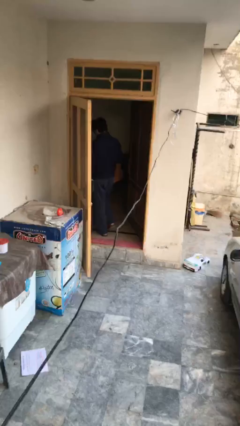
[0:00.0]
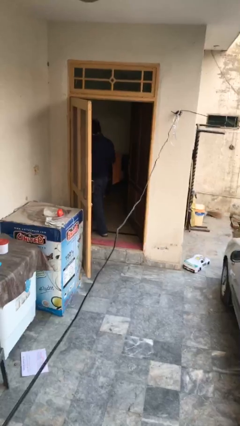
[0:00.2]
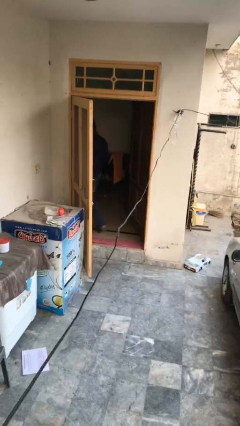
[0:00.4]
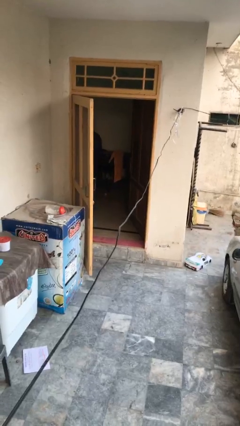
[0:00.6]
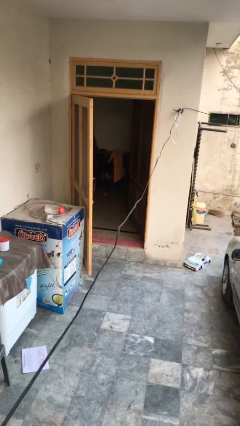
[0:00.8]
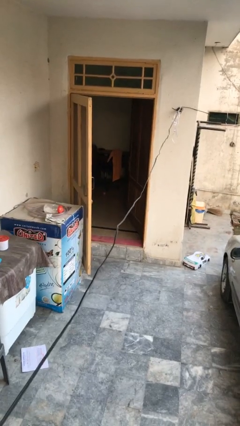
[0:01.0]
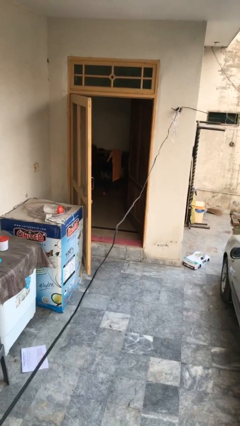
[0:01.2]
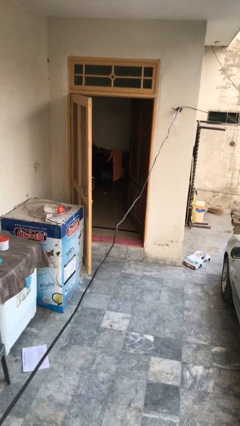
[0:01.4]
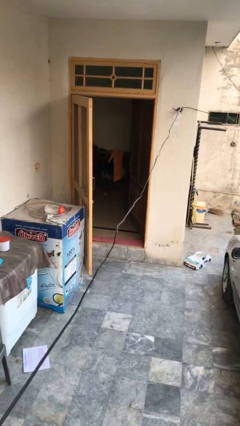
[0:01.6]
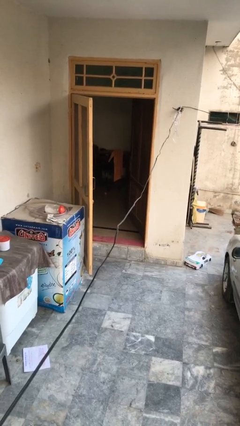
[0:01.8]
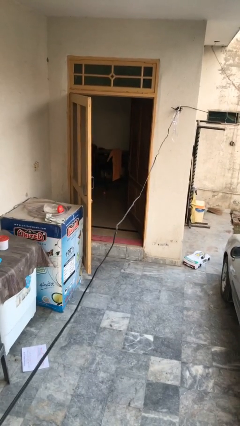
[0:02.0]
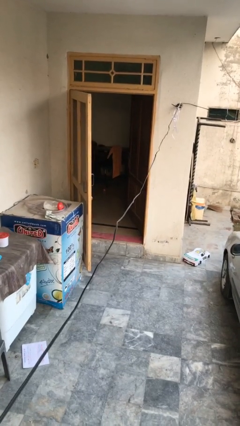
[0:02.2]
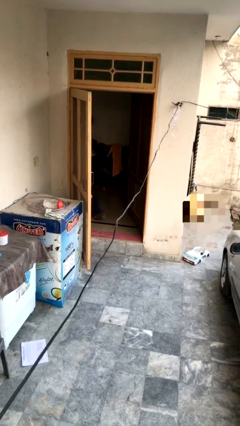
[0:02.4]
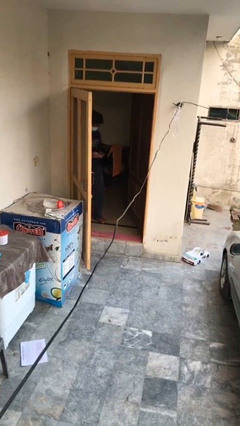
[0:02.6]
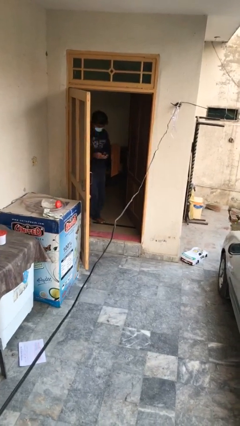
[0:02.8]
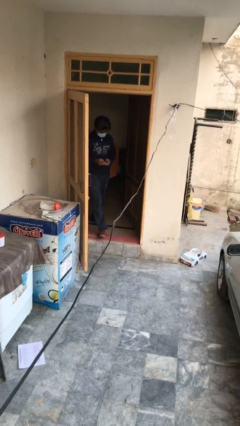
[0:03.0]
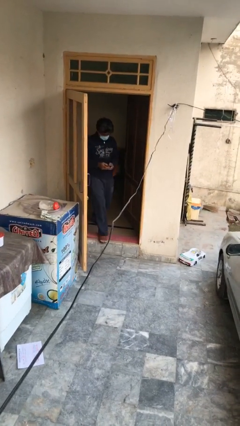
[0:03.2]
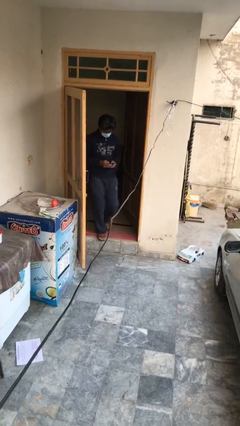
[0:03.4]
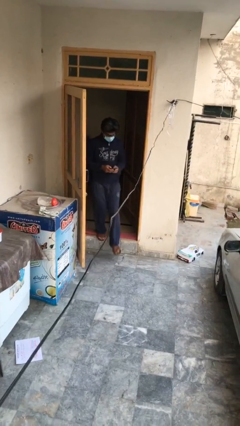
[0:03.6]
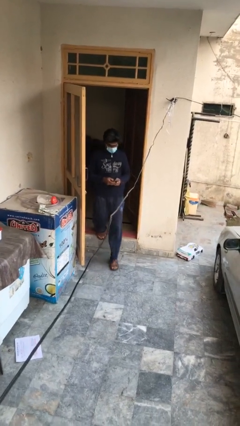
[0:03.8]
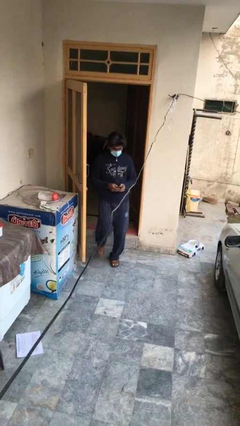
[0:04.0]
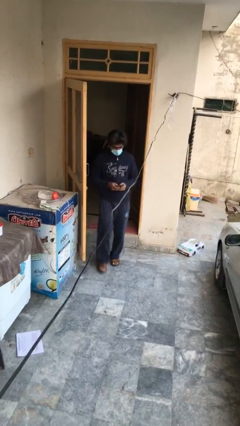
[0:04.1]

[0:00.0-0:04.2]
person enters scene through structure

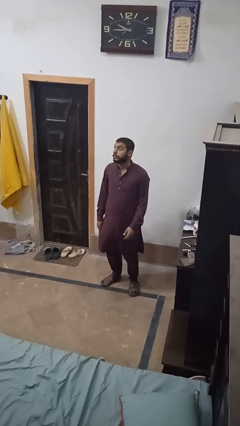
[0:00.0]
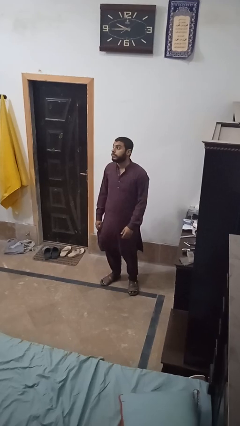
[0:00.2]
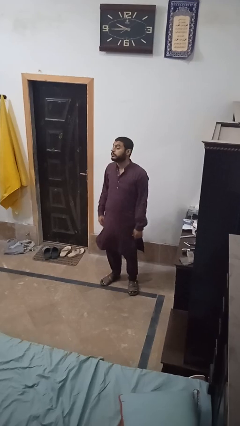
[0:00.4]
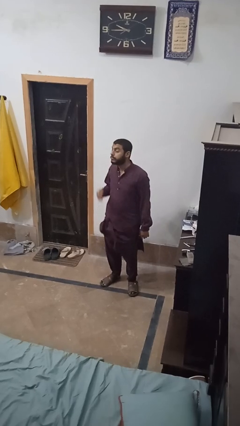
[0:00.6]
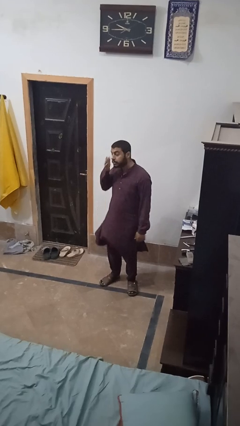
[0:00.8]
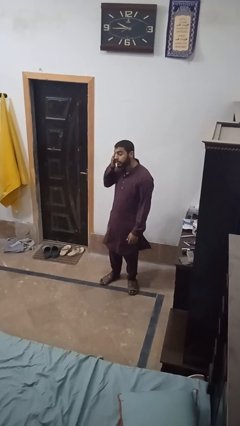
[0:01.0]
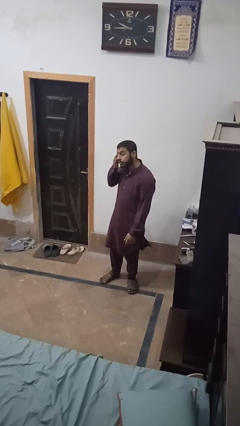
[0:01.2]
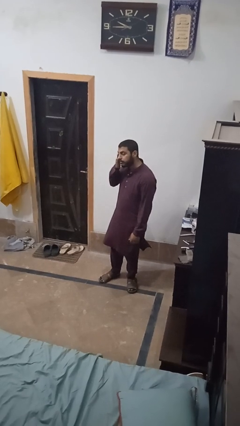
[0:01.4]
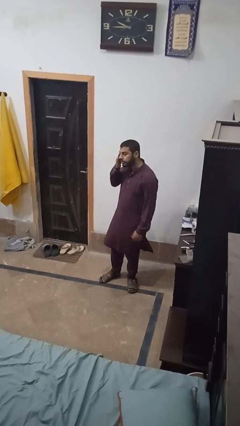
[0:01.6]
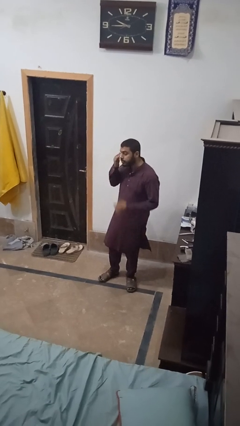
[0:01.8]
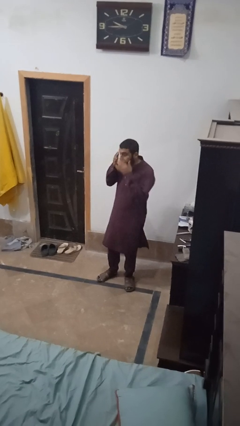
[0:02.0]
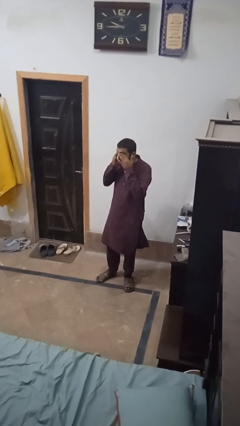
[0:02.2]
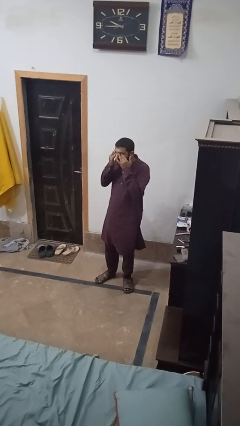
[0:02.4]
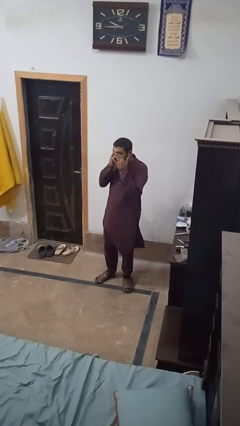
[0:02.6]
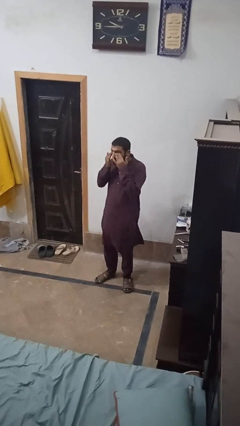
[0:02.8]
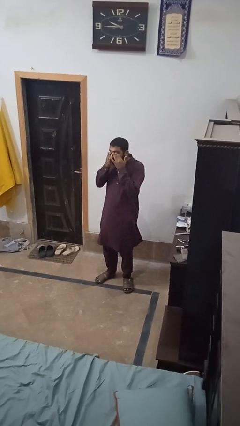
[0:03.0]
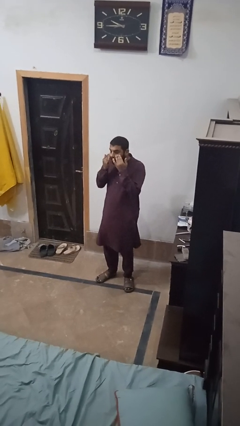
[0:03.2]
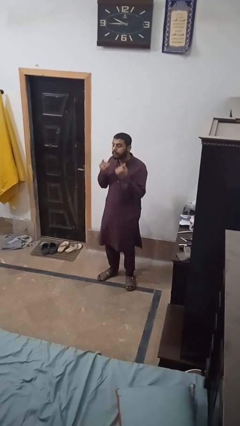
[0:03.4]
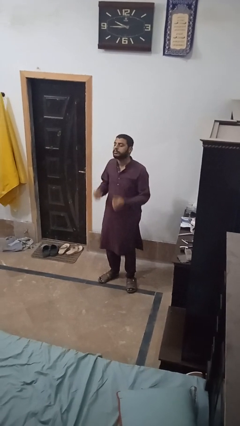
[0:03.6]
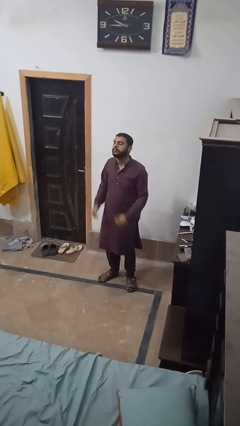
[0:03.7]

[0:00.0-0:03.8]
person rubs eyes

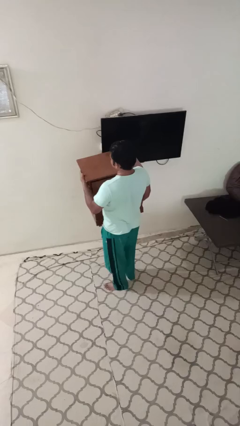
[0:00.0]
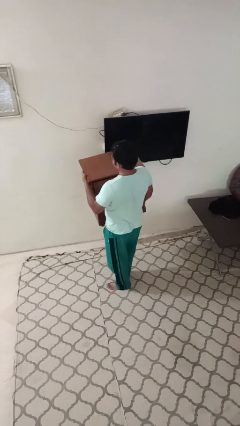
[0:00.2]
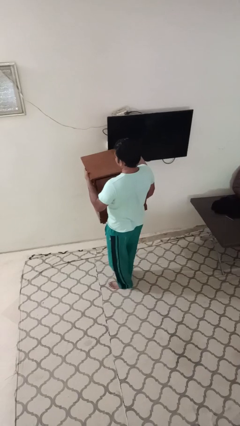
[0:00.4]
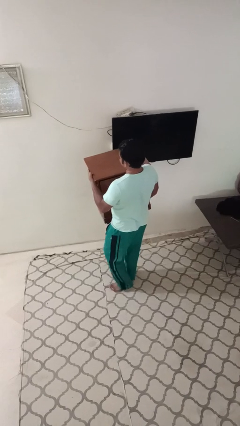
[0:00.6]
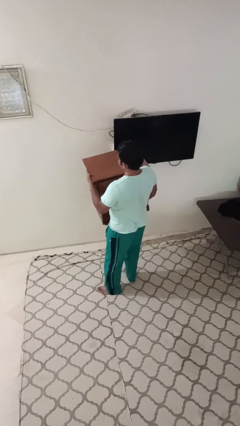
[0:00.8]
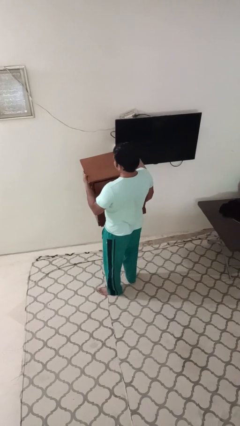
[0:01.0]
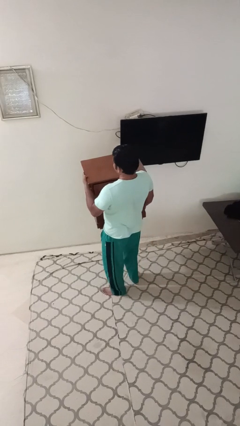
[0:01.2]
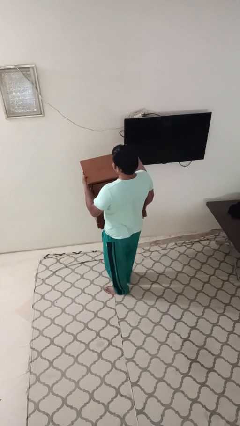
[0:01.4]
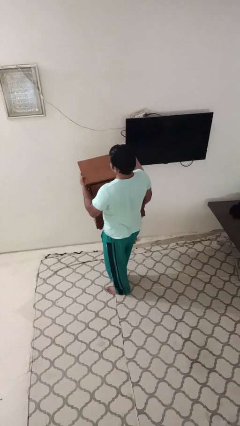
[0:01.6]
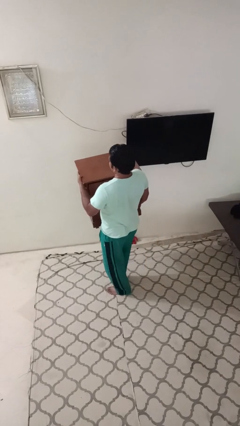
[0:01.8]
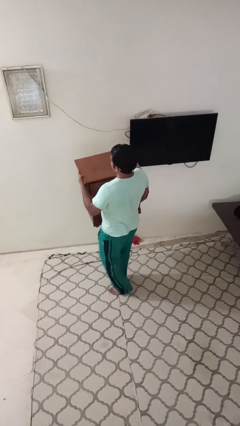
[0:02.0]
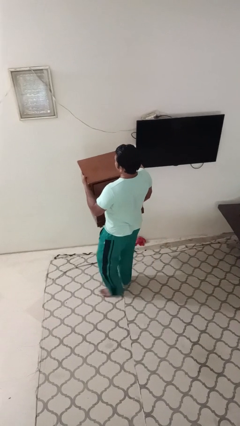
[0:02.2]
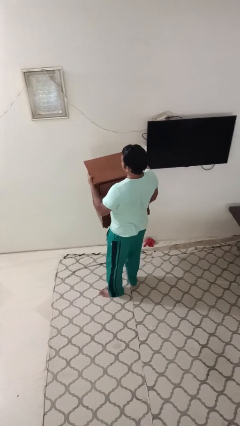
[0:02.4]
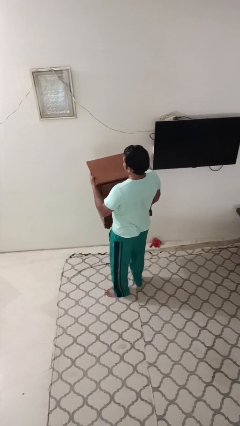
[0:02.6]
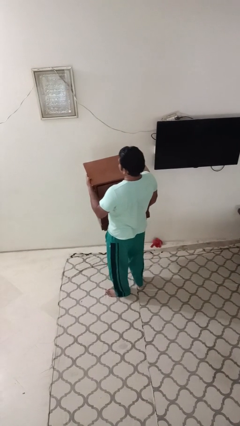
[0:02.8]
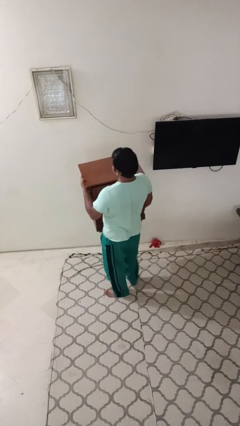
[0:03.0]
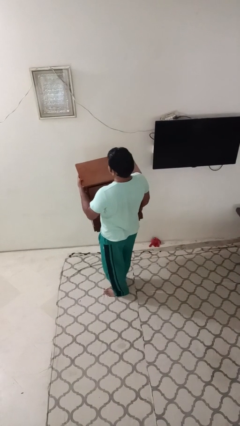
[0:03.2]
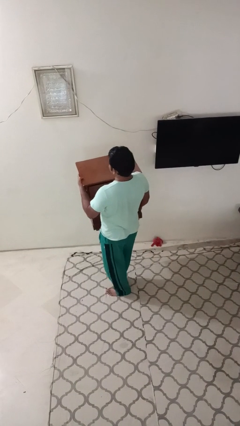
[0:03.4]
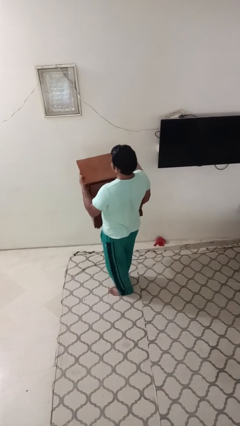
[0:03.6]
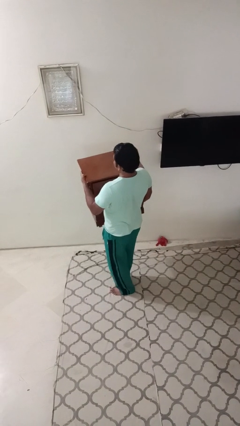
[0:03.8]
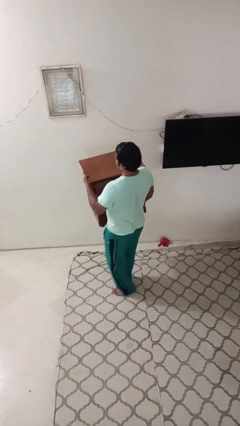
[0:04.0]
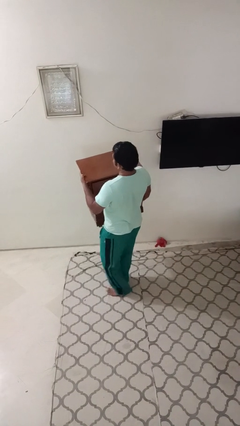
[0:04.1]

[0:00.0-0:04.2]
person carries furniture

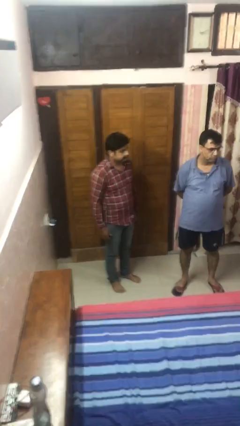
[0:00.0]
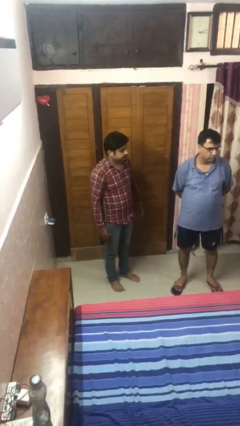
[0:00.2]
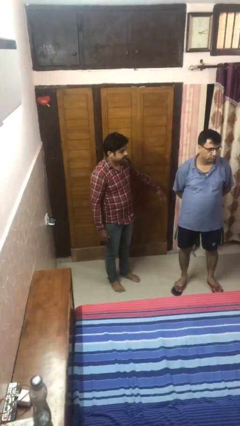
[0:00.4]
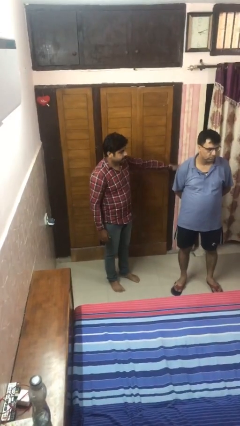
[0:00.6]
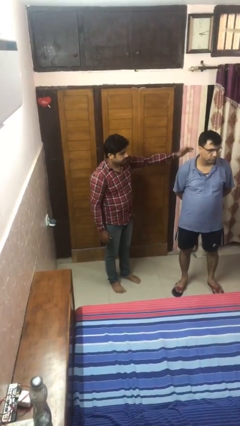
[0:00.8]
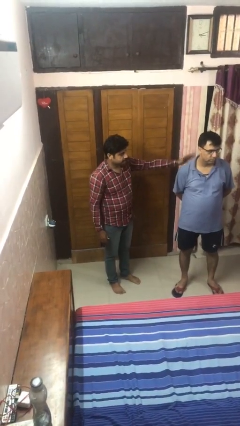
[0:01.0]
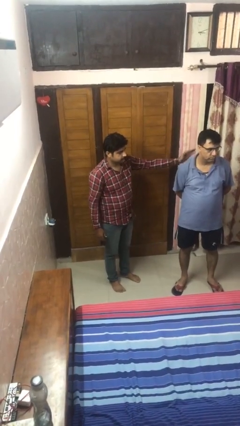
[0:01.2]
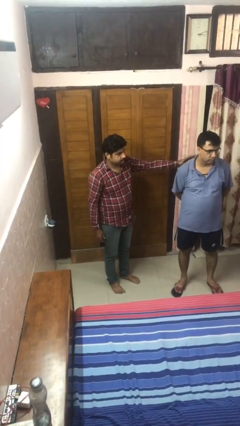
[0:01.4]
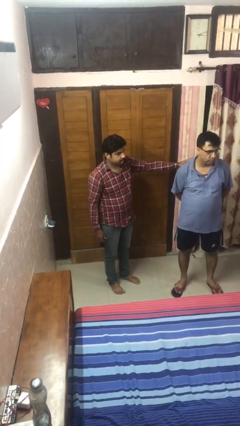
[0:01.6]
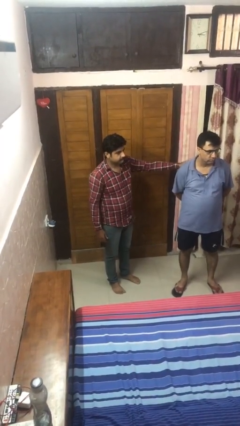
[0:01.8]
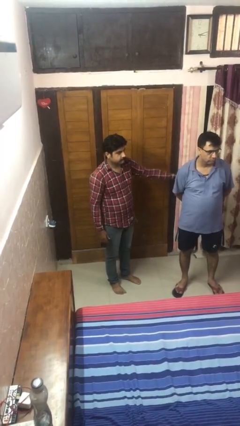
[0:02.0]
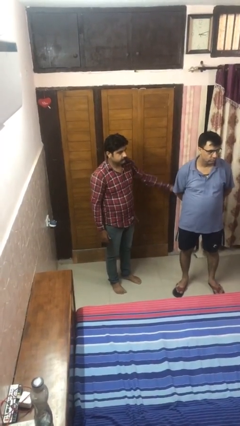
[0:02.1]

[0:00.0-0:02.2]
person pounds shoulders of person

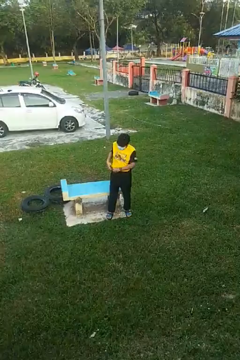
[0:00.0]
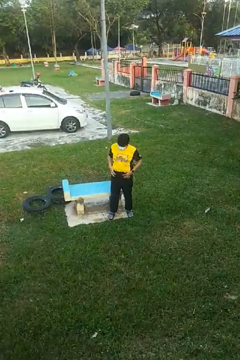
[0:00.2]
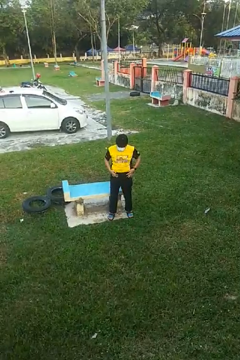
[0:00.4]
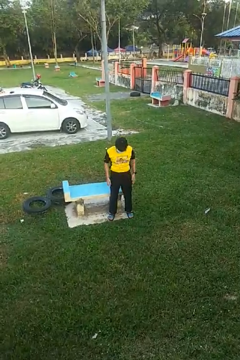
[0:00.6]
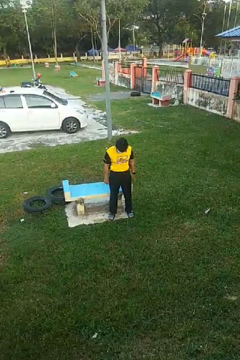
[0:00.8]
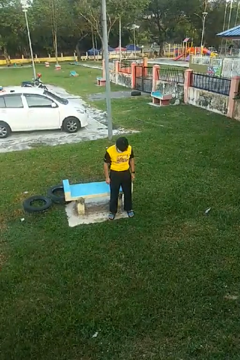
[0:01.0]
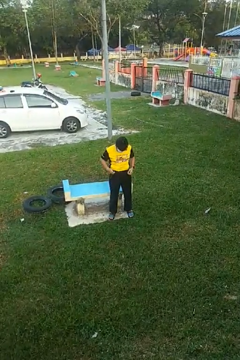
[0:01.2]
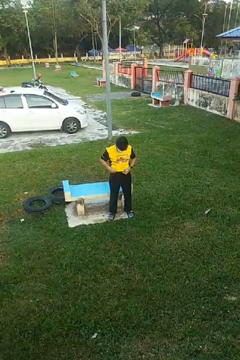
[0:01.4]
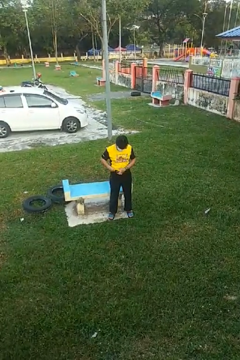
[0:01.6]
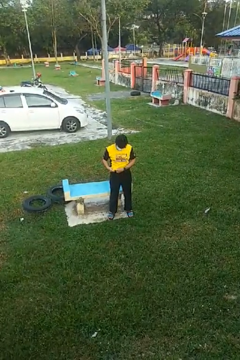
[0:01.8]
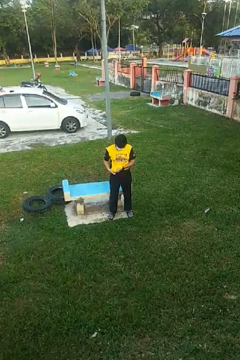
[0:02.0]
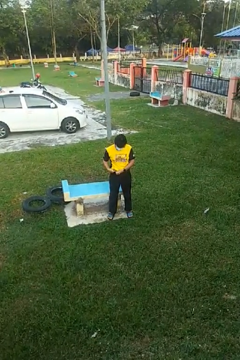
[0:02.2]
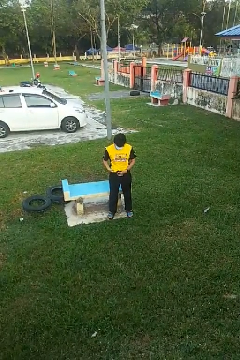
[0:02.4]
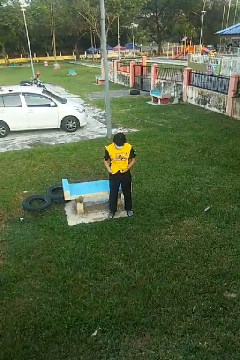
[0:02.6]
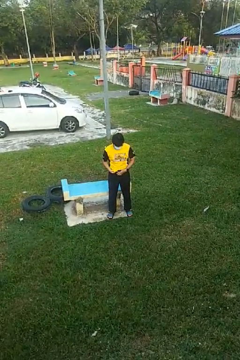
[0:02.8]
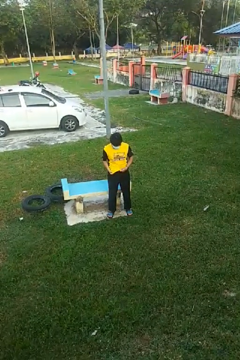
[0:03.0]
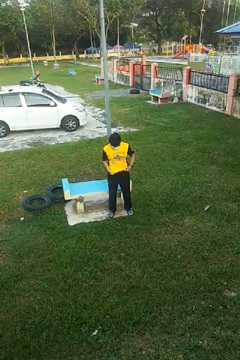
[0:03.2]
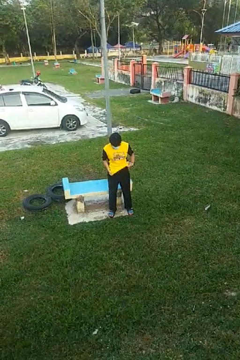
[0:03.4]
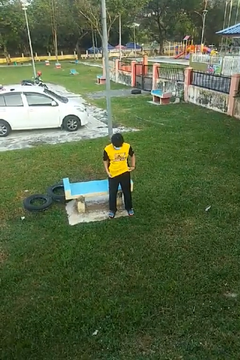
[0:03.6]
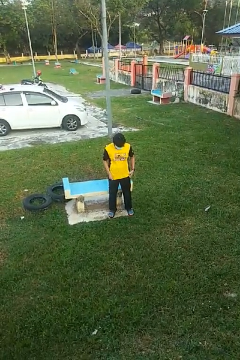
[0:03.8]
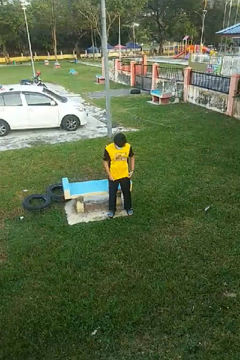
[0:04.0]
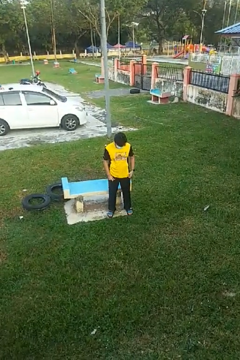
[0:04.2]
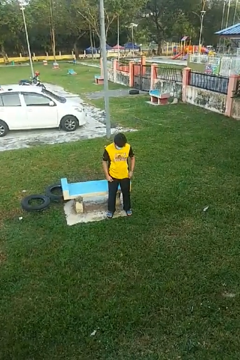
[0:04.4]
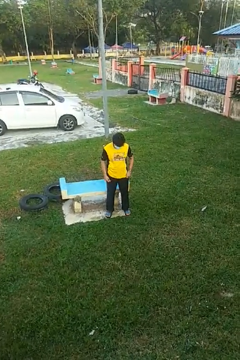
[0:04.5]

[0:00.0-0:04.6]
person untucks shirt
